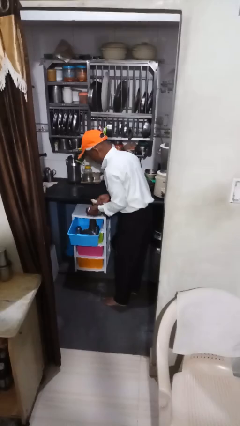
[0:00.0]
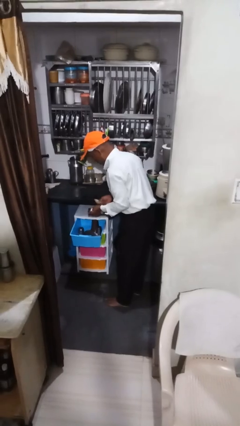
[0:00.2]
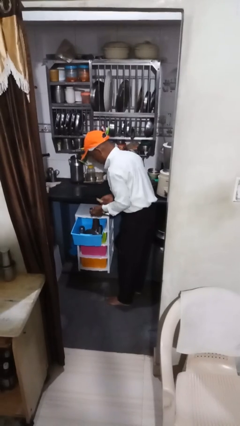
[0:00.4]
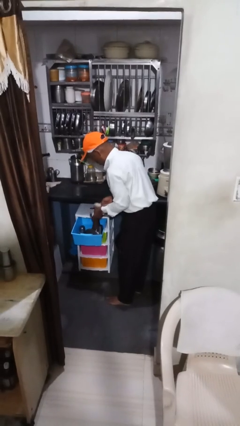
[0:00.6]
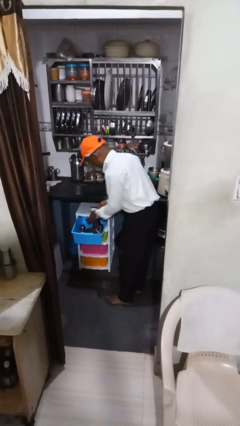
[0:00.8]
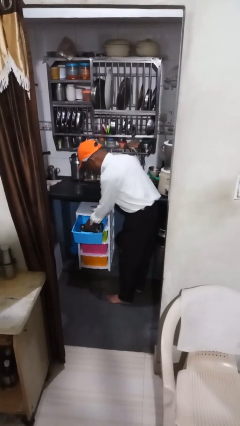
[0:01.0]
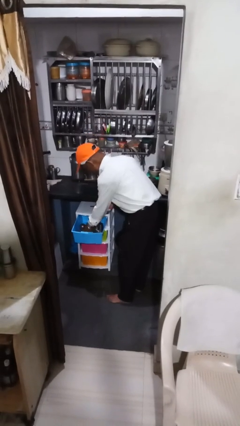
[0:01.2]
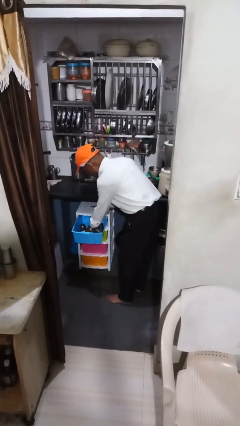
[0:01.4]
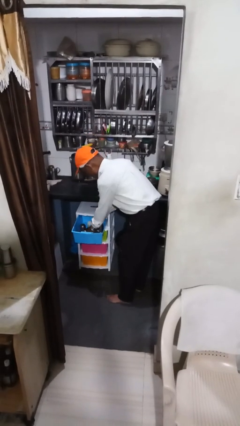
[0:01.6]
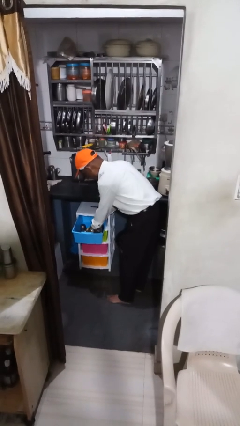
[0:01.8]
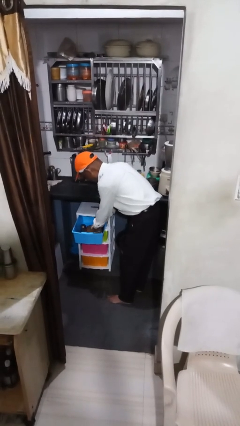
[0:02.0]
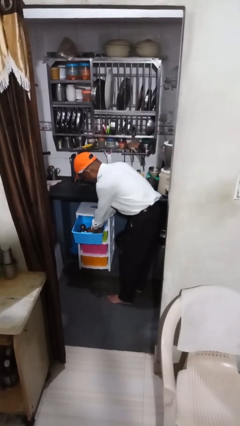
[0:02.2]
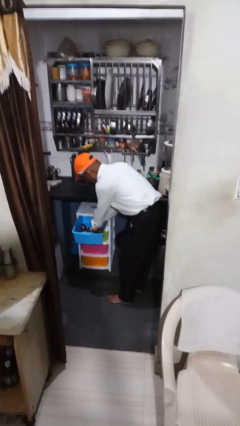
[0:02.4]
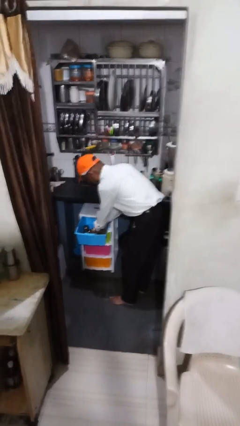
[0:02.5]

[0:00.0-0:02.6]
person puts object into kitchen drawer

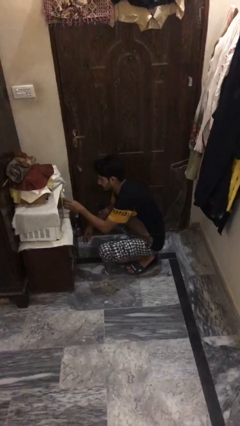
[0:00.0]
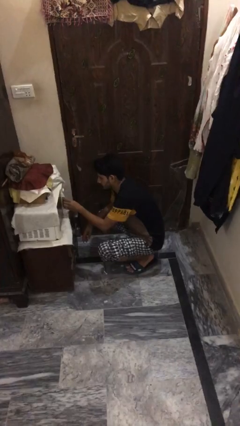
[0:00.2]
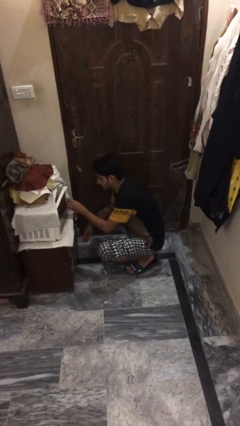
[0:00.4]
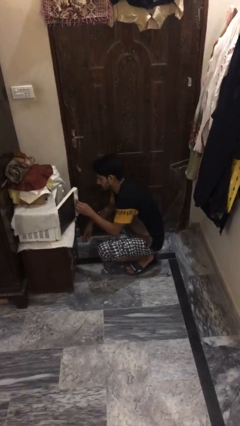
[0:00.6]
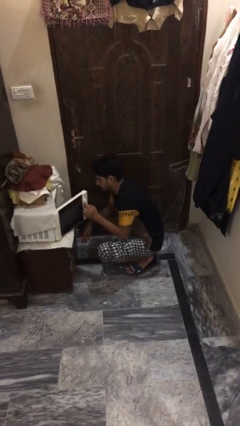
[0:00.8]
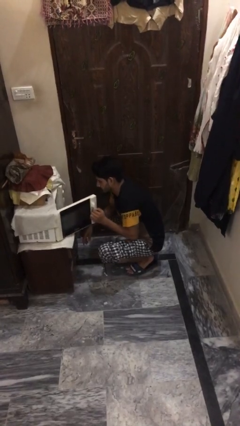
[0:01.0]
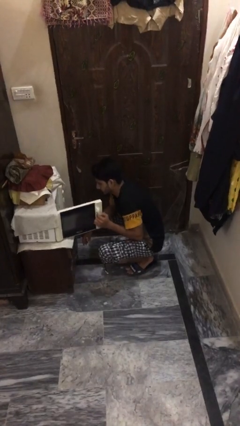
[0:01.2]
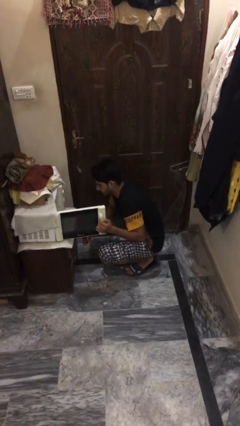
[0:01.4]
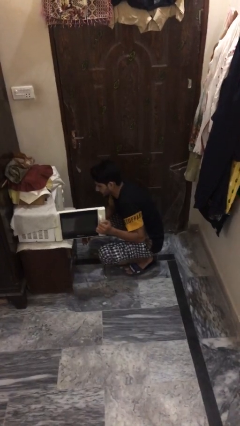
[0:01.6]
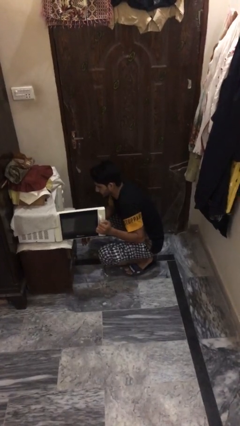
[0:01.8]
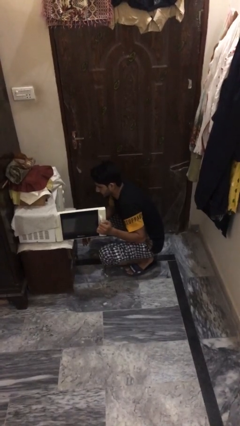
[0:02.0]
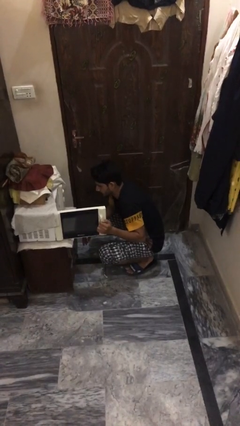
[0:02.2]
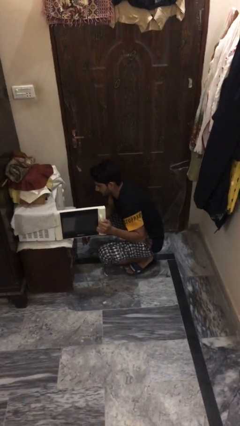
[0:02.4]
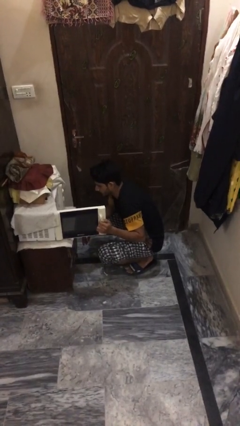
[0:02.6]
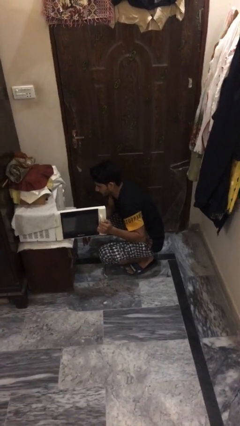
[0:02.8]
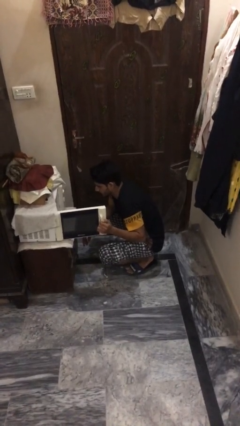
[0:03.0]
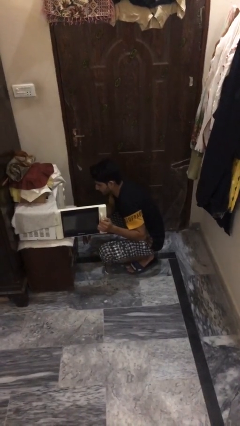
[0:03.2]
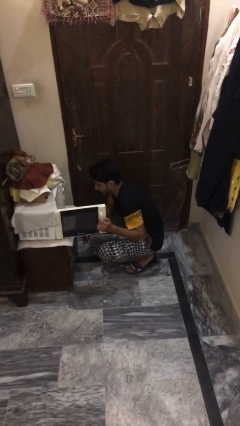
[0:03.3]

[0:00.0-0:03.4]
person opens microwave

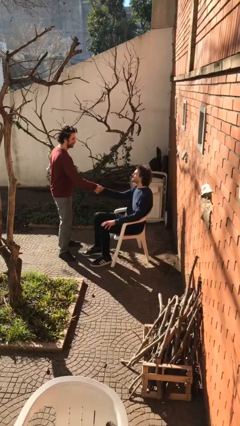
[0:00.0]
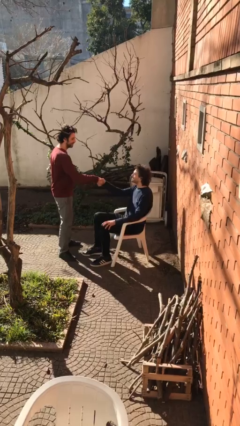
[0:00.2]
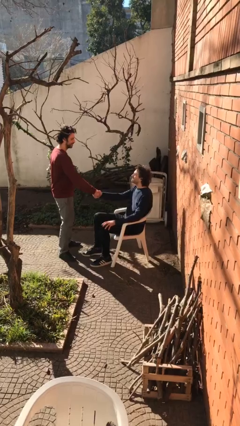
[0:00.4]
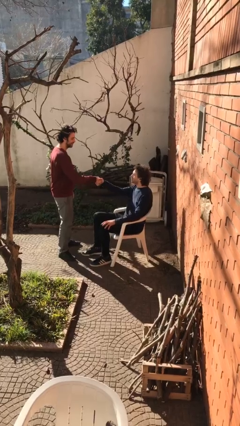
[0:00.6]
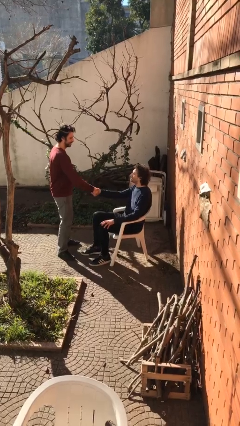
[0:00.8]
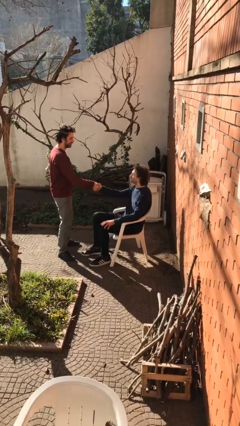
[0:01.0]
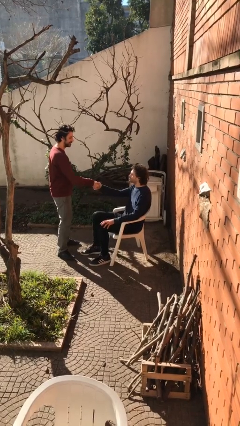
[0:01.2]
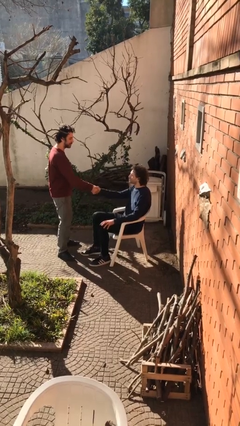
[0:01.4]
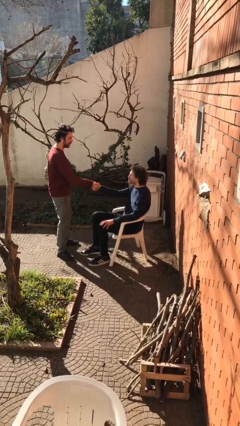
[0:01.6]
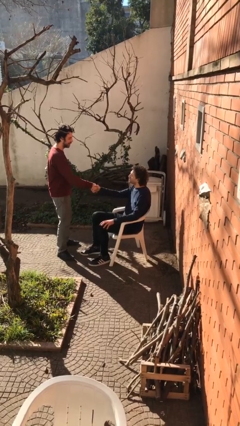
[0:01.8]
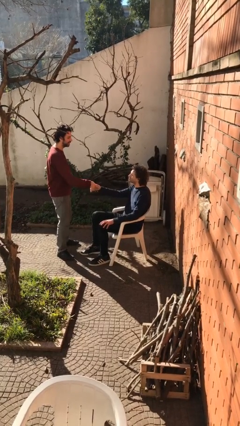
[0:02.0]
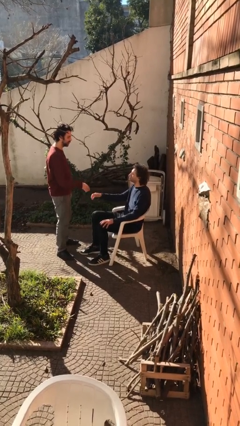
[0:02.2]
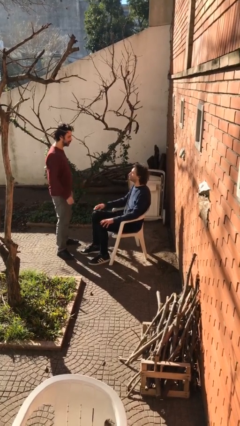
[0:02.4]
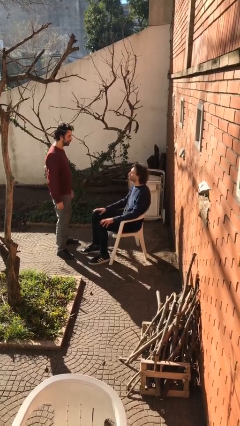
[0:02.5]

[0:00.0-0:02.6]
person shakes hand

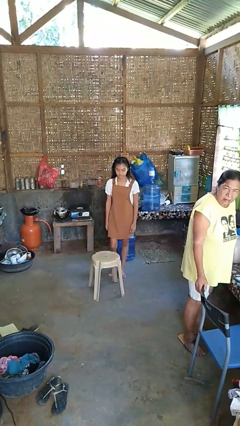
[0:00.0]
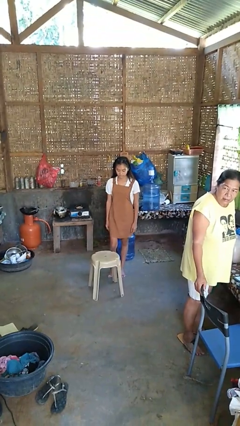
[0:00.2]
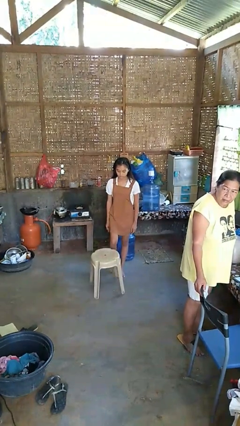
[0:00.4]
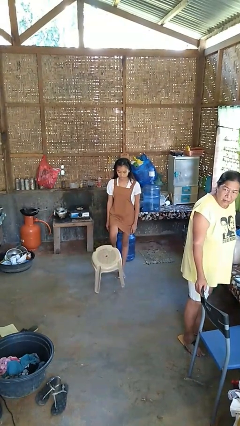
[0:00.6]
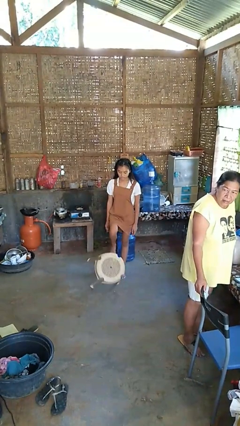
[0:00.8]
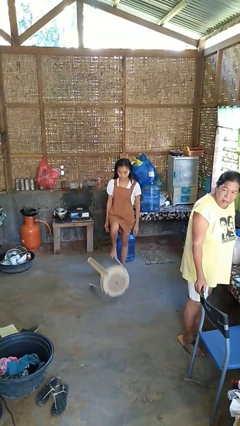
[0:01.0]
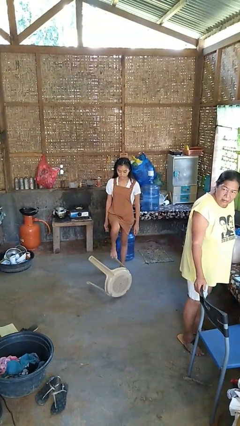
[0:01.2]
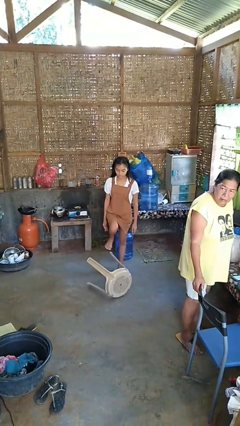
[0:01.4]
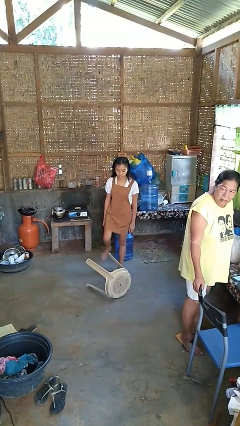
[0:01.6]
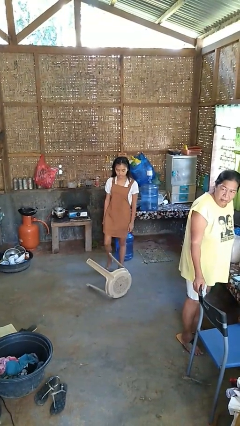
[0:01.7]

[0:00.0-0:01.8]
person knocks over furniture

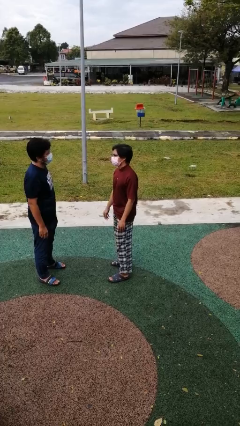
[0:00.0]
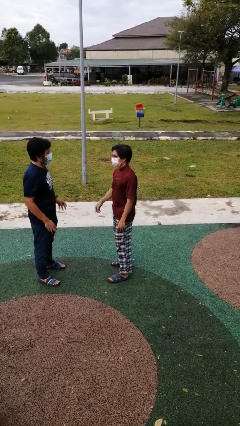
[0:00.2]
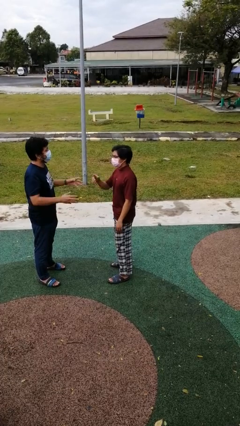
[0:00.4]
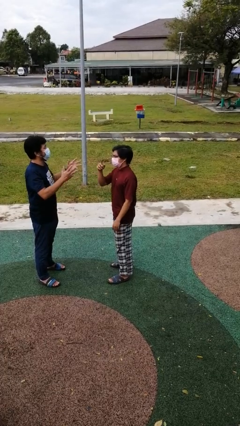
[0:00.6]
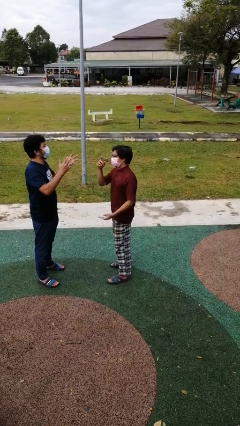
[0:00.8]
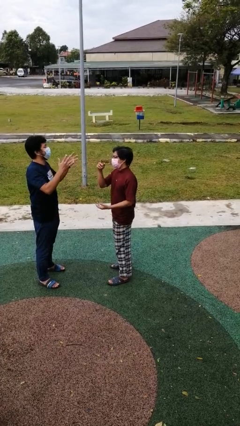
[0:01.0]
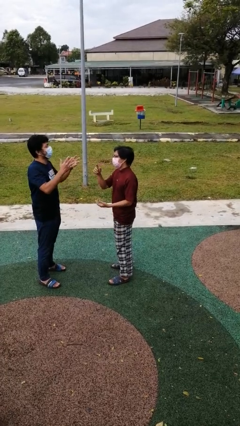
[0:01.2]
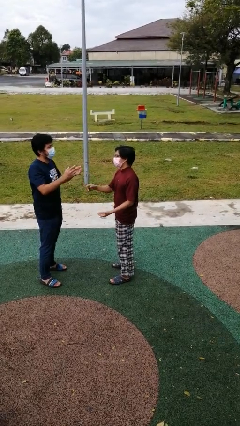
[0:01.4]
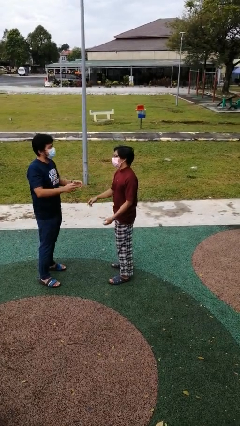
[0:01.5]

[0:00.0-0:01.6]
person talks to person

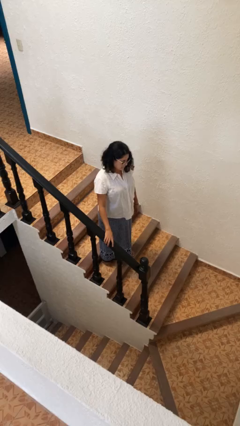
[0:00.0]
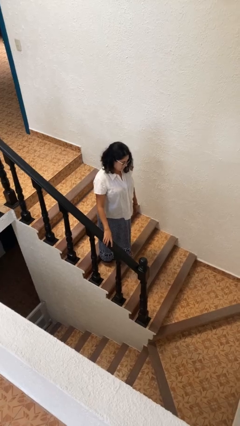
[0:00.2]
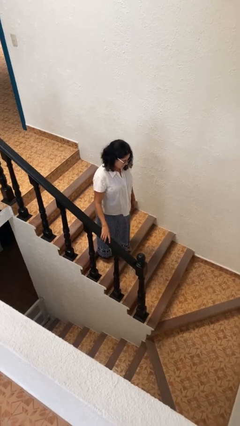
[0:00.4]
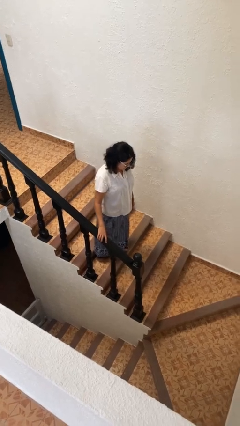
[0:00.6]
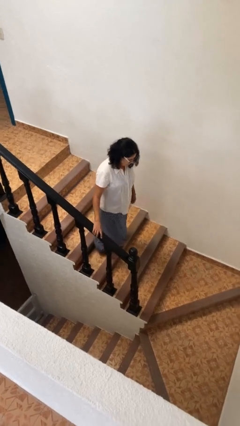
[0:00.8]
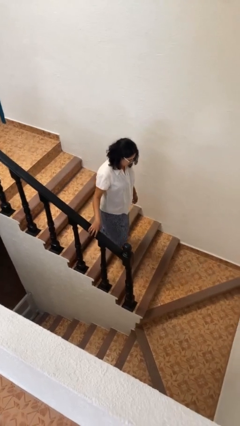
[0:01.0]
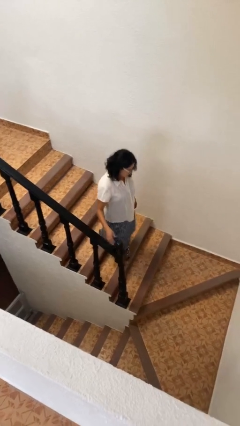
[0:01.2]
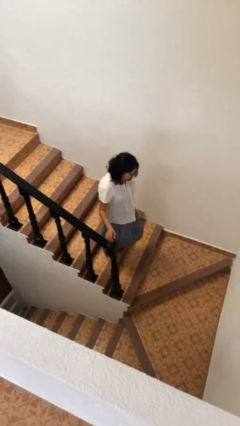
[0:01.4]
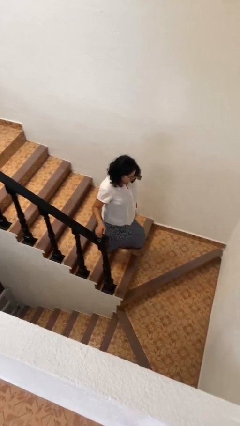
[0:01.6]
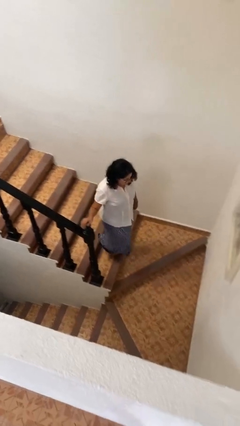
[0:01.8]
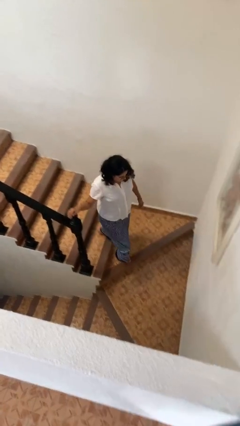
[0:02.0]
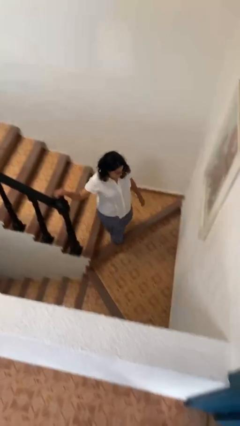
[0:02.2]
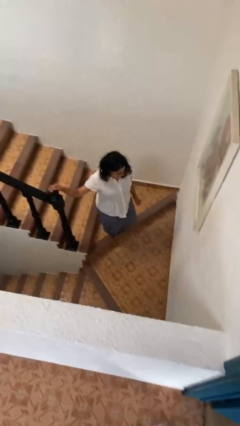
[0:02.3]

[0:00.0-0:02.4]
person climbs down stairs

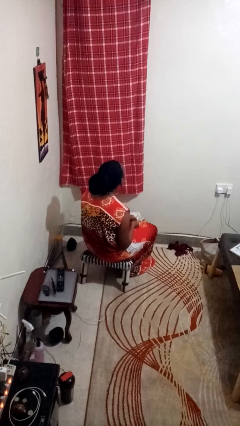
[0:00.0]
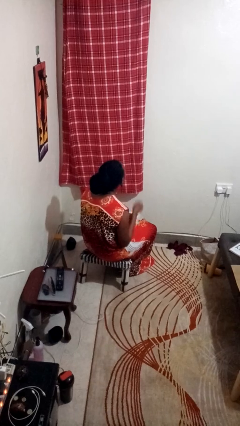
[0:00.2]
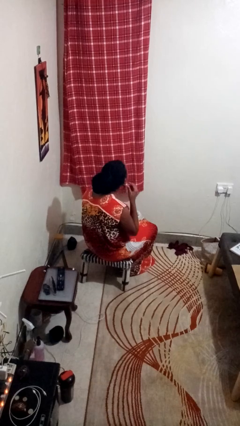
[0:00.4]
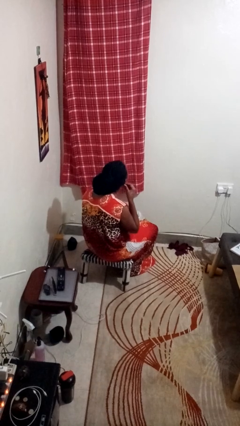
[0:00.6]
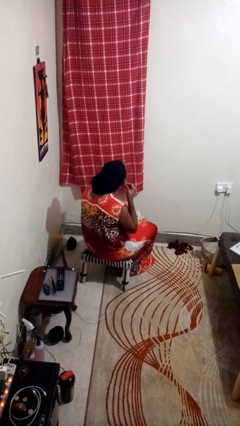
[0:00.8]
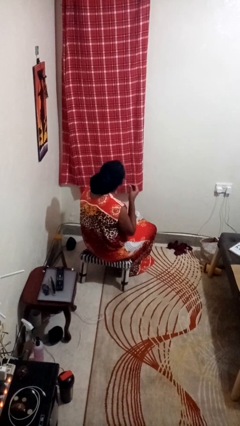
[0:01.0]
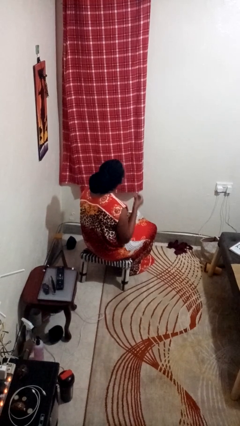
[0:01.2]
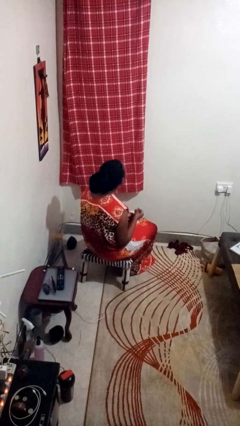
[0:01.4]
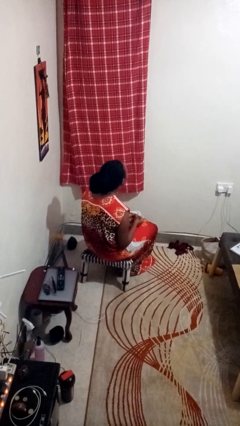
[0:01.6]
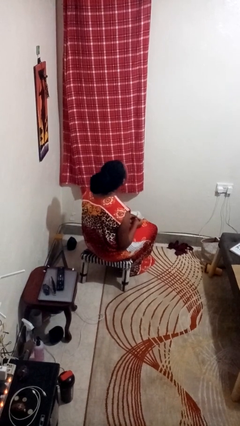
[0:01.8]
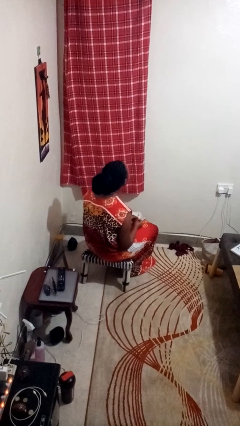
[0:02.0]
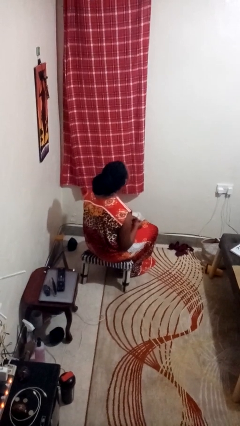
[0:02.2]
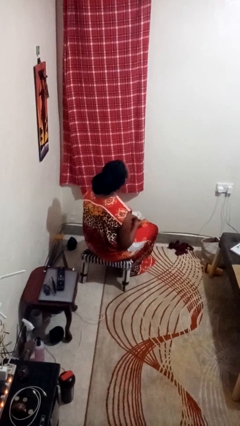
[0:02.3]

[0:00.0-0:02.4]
person takes off earrings
